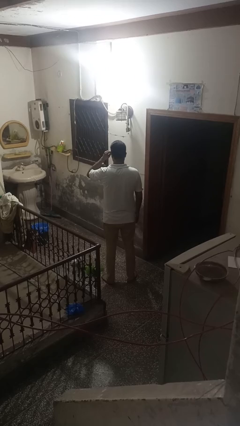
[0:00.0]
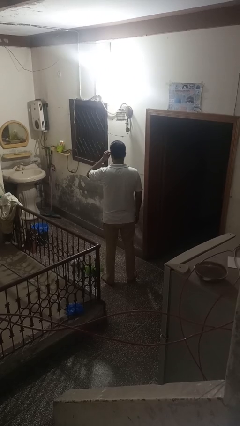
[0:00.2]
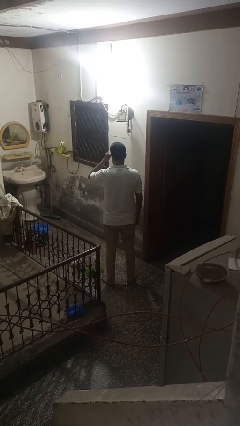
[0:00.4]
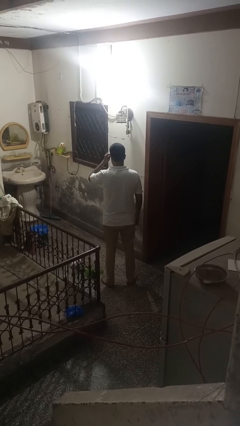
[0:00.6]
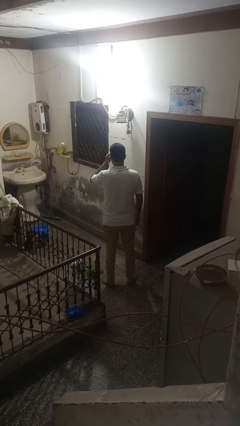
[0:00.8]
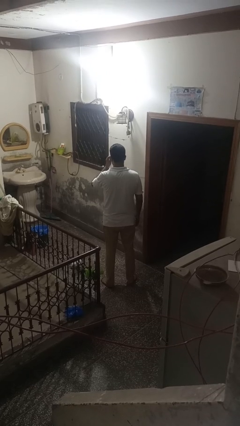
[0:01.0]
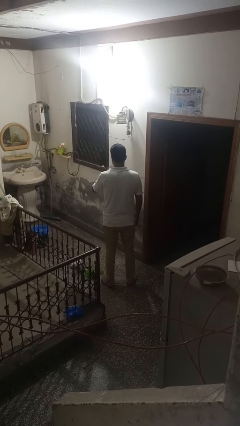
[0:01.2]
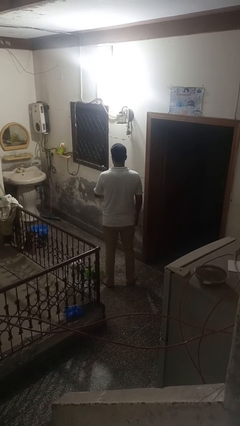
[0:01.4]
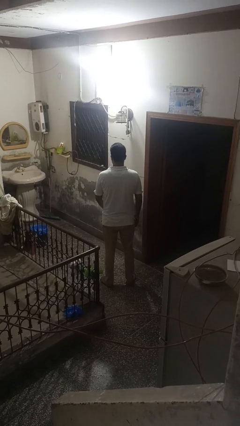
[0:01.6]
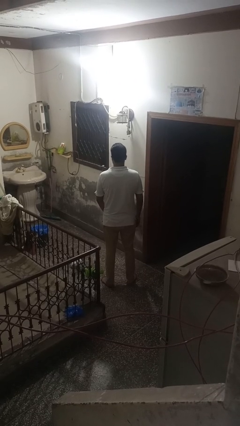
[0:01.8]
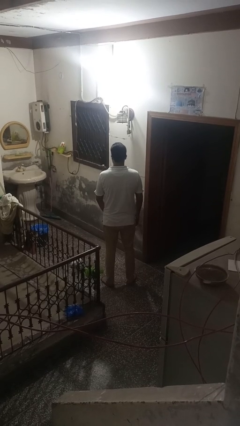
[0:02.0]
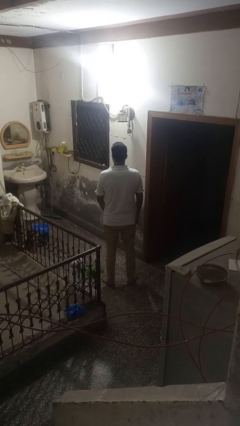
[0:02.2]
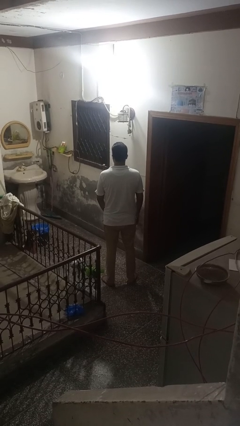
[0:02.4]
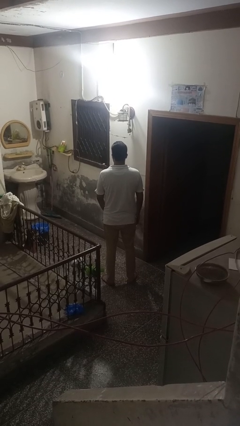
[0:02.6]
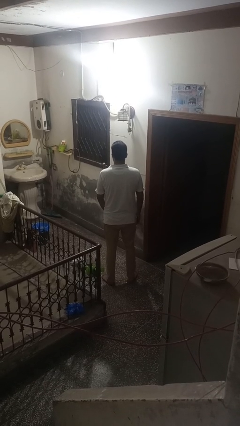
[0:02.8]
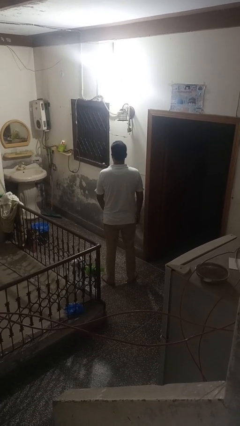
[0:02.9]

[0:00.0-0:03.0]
person takes off sunglasses

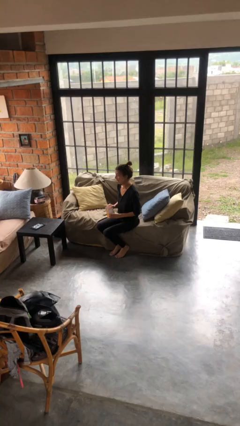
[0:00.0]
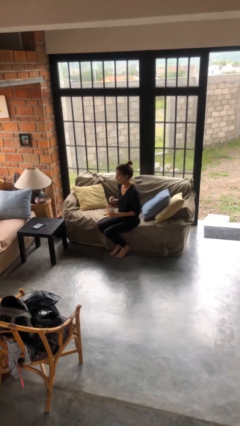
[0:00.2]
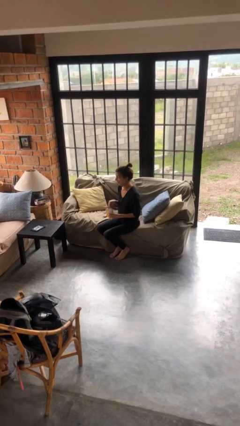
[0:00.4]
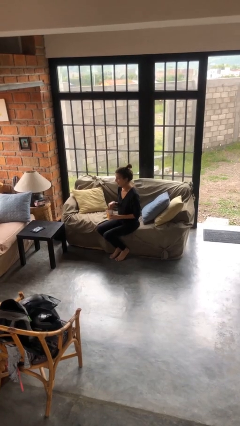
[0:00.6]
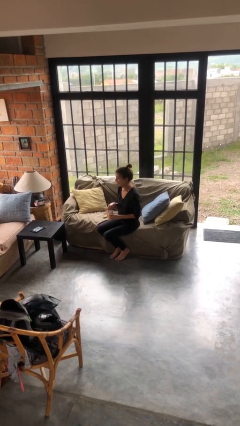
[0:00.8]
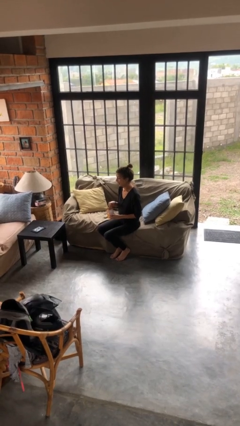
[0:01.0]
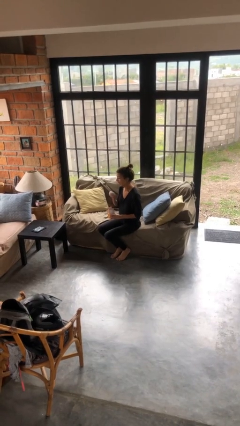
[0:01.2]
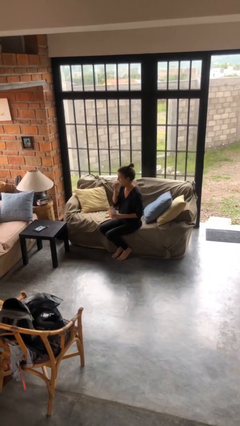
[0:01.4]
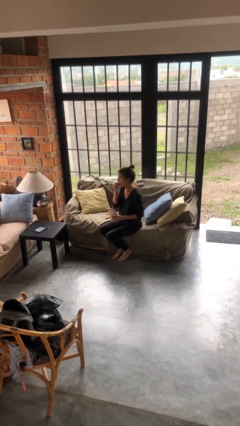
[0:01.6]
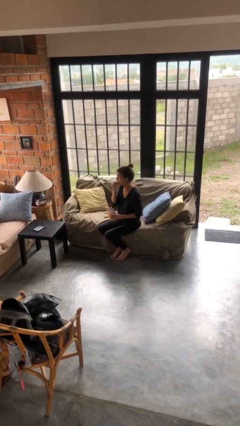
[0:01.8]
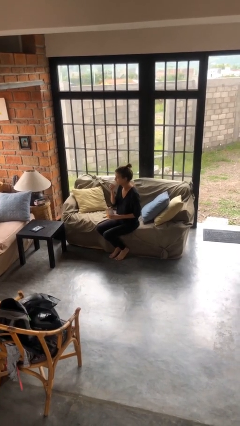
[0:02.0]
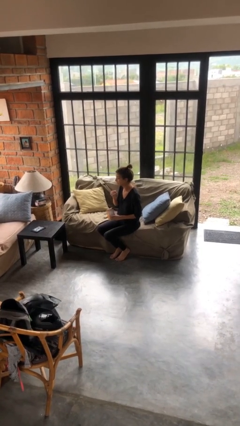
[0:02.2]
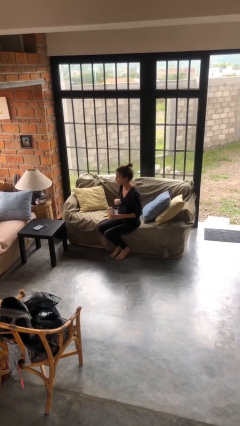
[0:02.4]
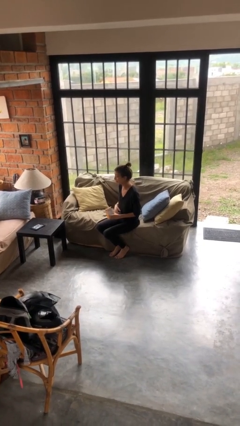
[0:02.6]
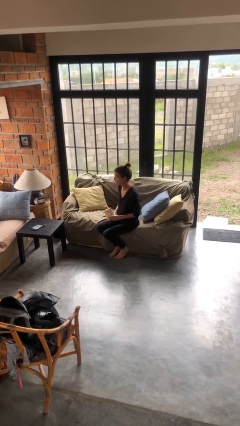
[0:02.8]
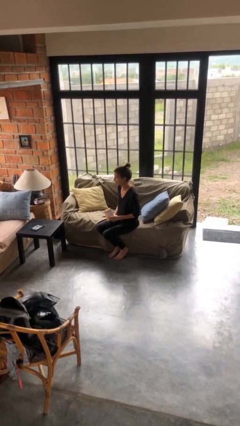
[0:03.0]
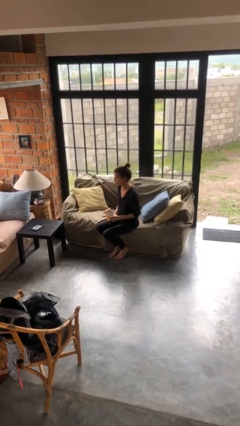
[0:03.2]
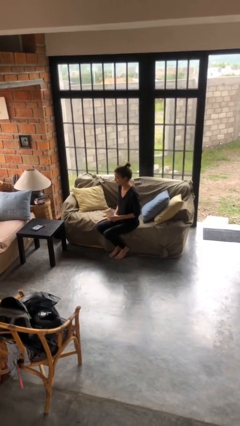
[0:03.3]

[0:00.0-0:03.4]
person eats snack from bag

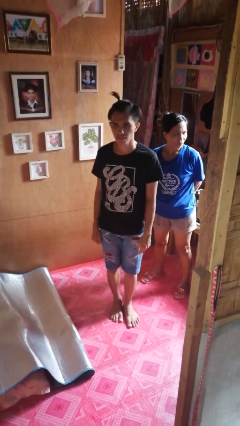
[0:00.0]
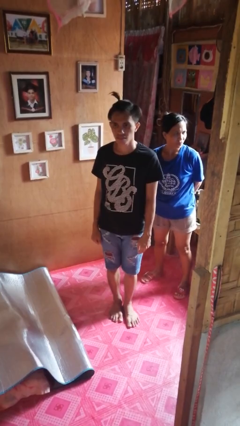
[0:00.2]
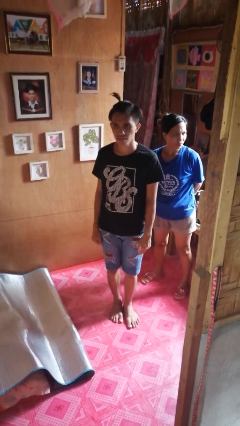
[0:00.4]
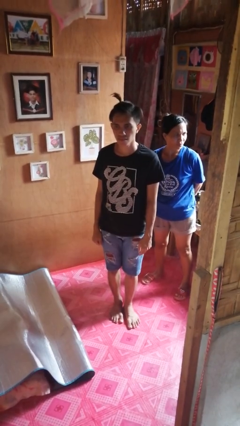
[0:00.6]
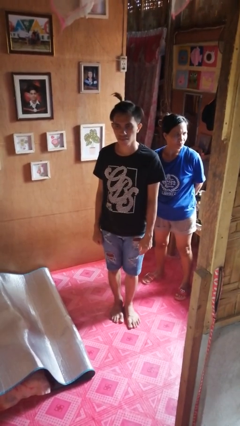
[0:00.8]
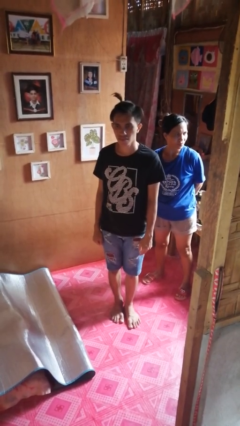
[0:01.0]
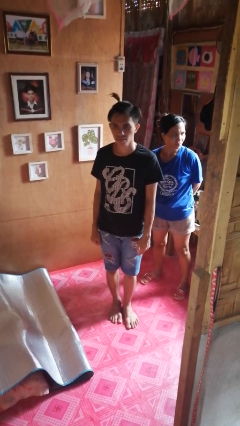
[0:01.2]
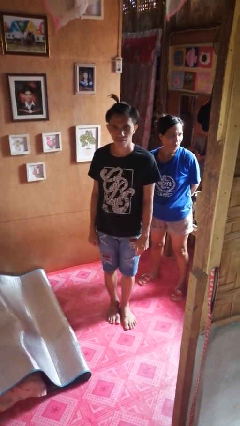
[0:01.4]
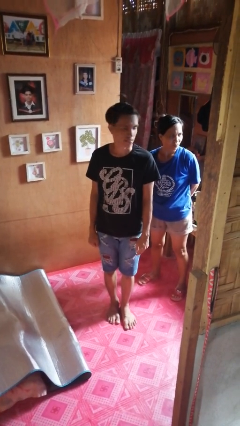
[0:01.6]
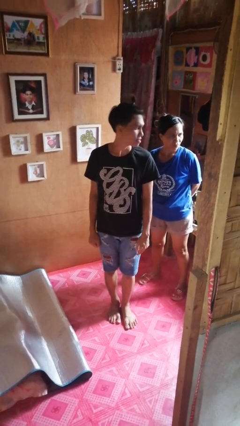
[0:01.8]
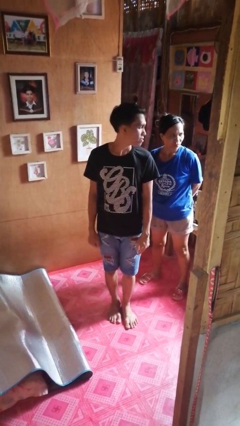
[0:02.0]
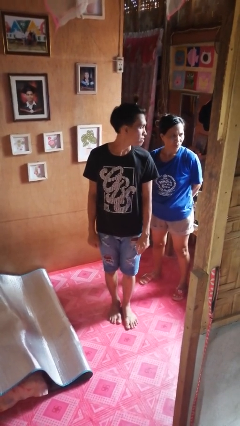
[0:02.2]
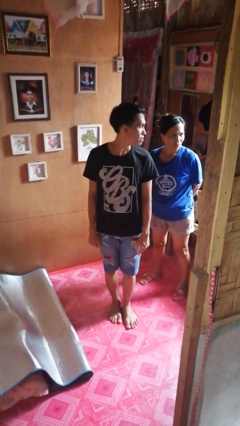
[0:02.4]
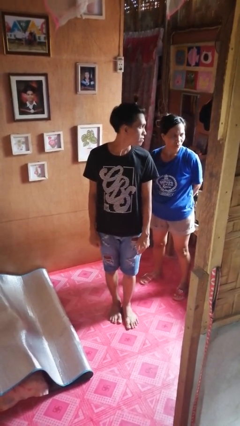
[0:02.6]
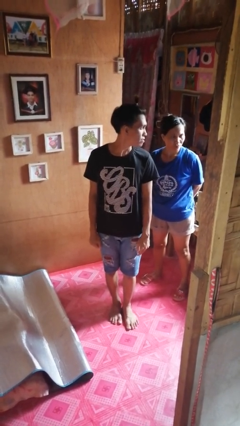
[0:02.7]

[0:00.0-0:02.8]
person looks over shoulder

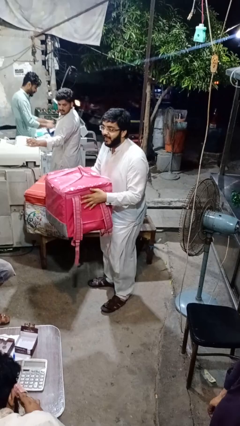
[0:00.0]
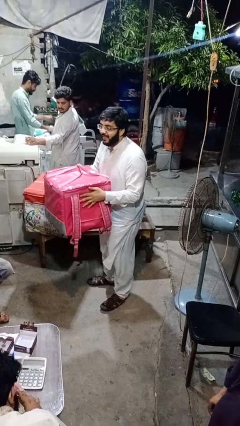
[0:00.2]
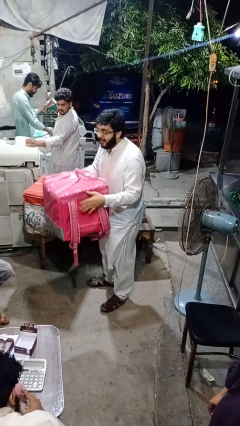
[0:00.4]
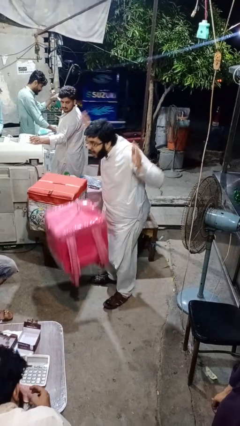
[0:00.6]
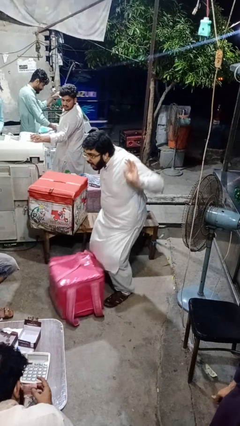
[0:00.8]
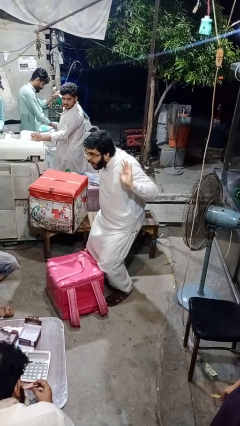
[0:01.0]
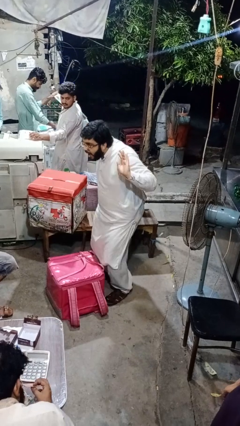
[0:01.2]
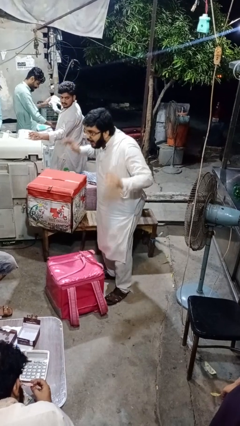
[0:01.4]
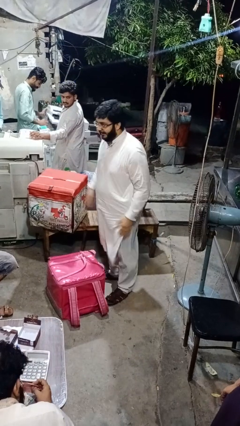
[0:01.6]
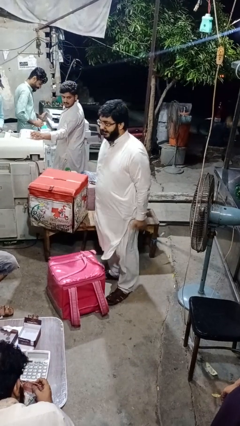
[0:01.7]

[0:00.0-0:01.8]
person drops object

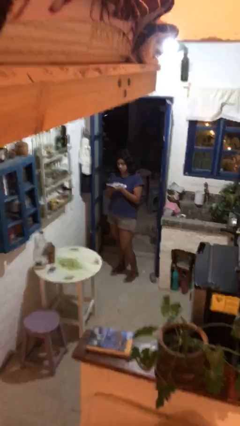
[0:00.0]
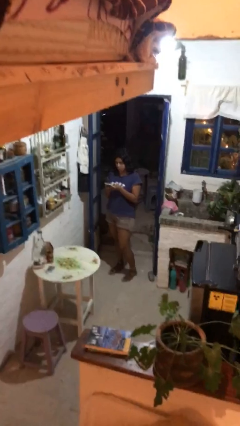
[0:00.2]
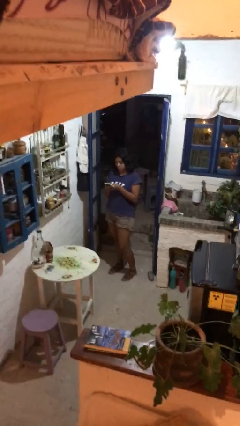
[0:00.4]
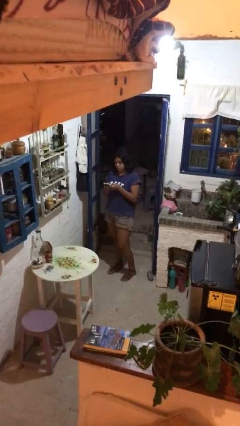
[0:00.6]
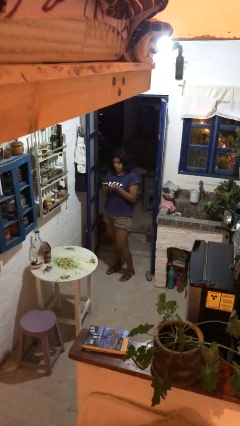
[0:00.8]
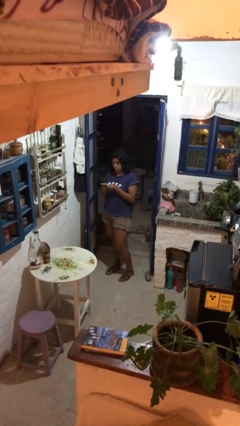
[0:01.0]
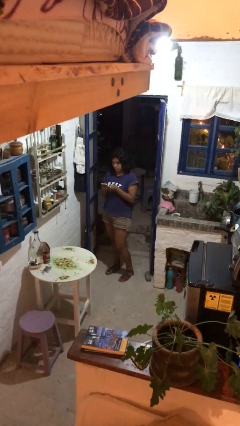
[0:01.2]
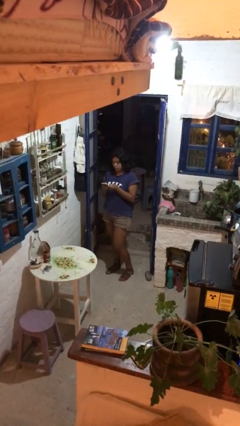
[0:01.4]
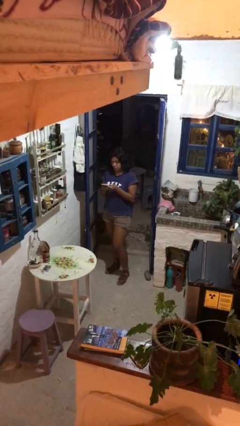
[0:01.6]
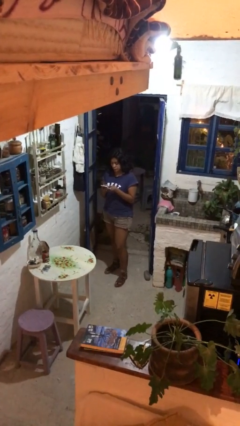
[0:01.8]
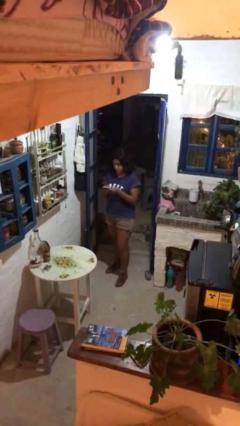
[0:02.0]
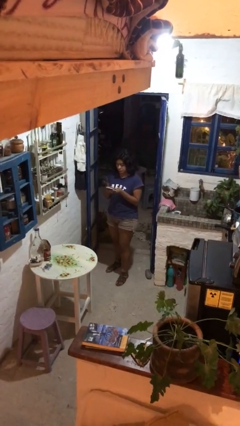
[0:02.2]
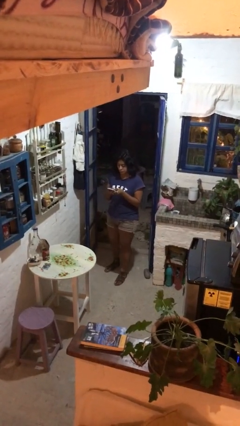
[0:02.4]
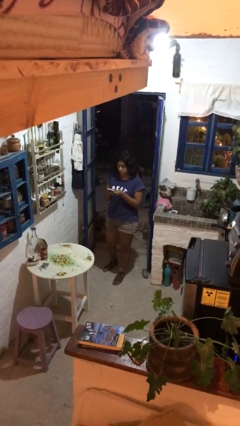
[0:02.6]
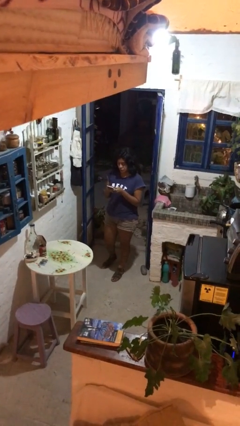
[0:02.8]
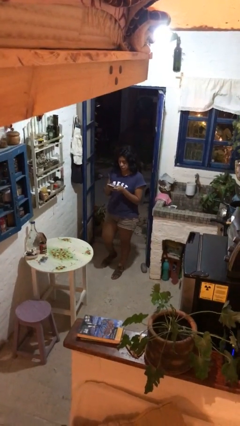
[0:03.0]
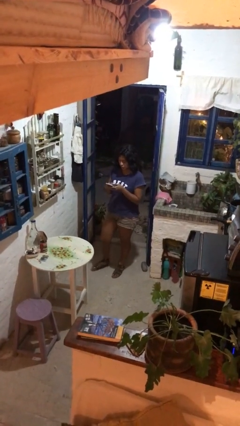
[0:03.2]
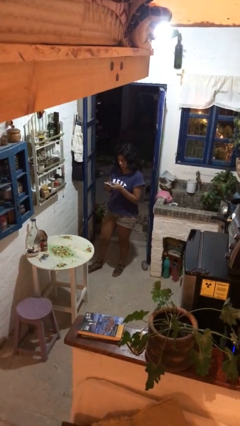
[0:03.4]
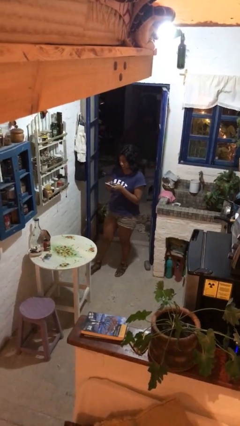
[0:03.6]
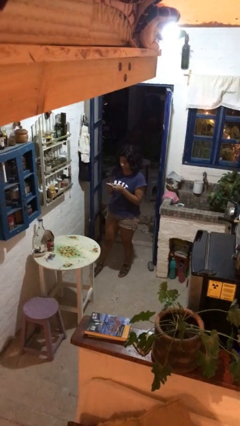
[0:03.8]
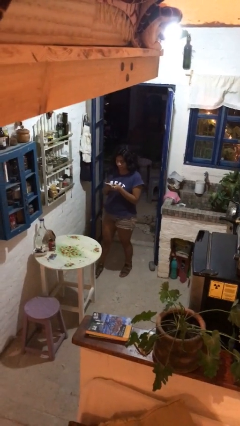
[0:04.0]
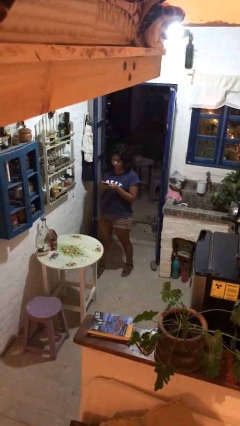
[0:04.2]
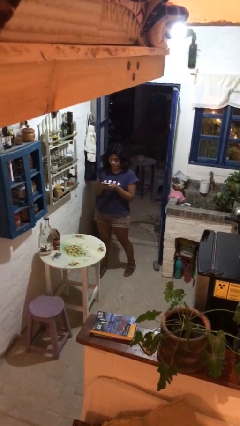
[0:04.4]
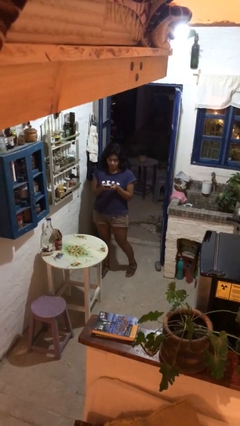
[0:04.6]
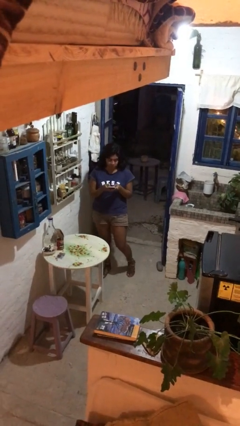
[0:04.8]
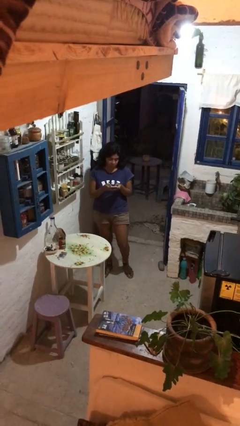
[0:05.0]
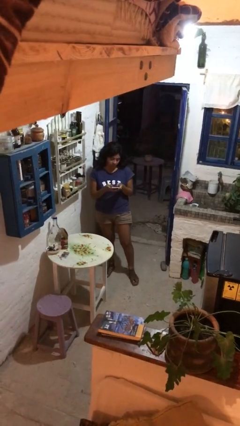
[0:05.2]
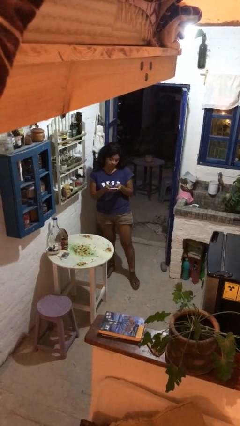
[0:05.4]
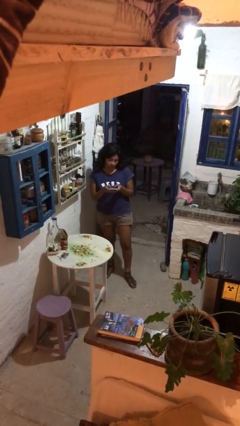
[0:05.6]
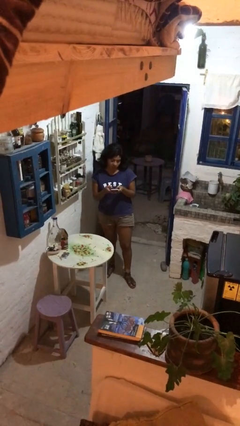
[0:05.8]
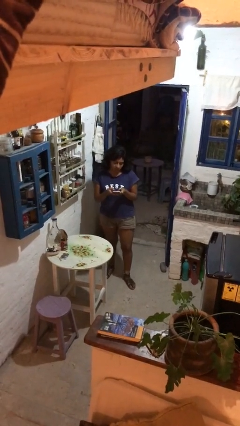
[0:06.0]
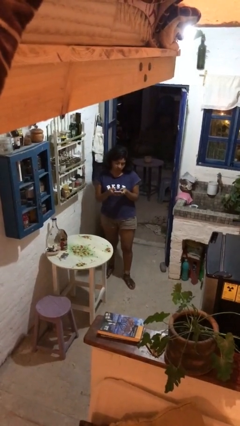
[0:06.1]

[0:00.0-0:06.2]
person texts on phone

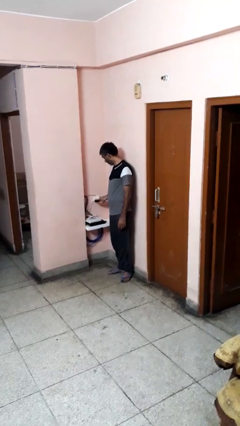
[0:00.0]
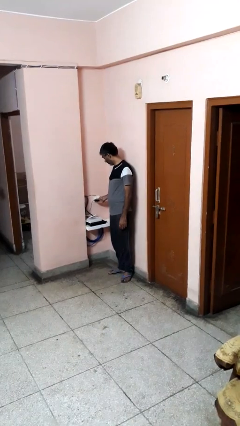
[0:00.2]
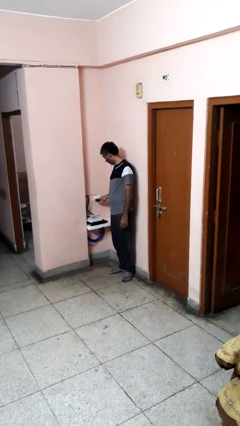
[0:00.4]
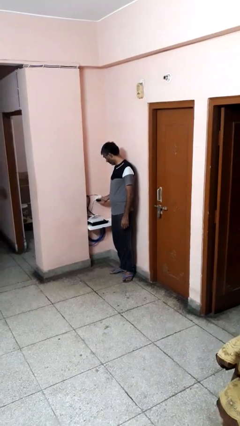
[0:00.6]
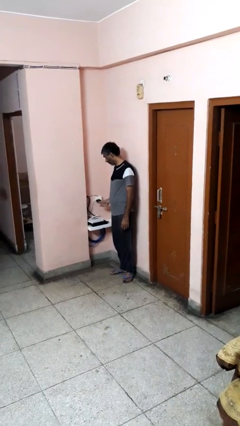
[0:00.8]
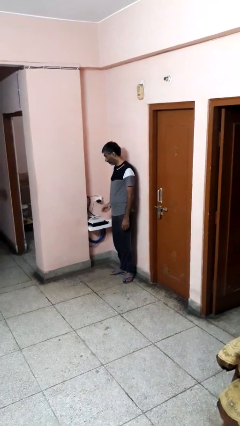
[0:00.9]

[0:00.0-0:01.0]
person plugs into electrical socket
